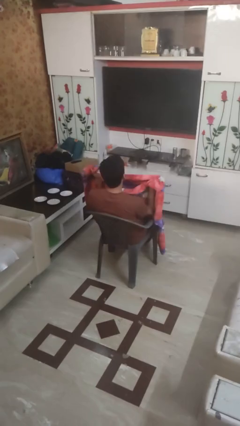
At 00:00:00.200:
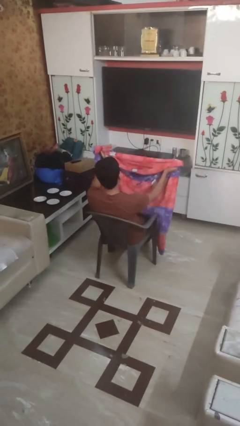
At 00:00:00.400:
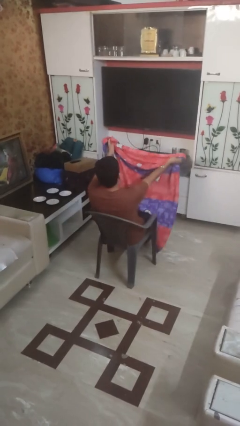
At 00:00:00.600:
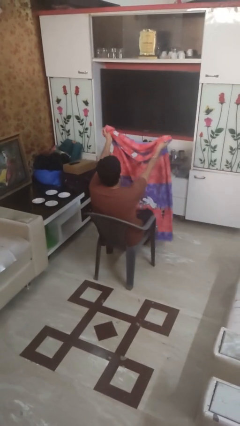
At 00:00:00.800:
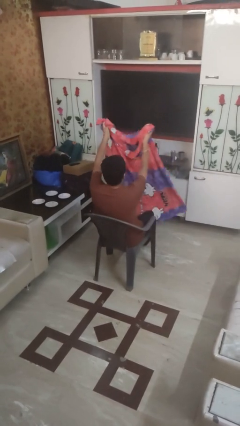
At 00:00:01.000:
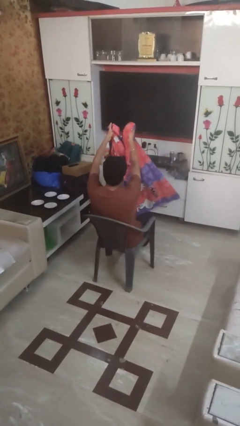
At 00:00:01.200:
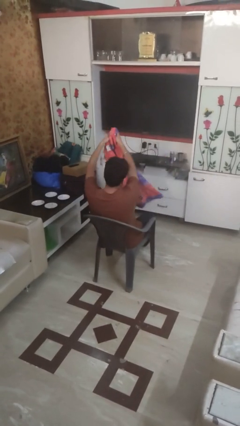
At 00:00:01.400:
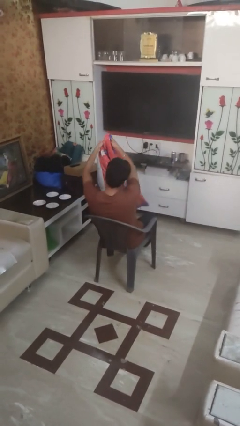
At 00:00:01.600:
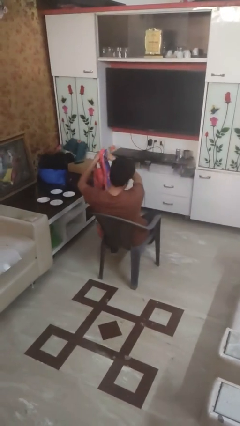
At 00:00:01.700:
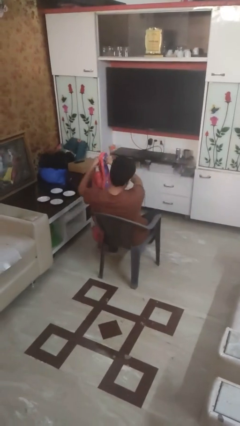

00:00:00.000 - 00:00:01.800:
person uncovers with blanket

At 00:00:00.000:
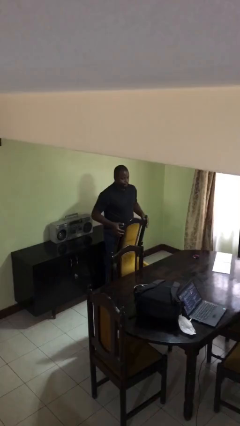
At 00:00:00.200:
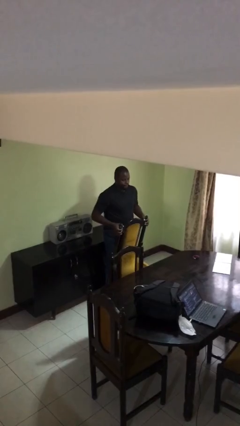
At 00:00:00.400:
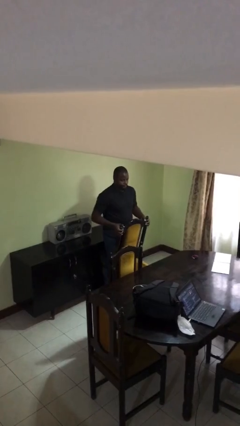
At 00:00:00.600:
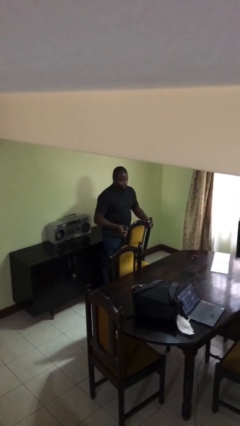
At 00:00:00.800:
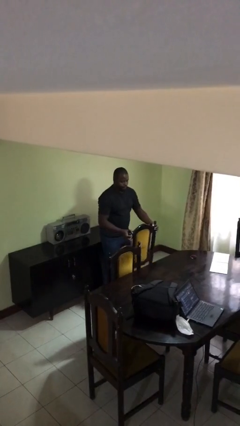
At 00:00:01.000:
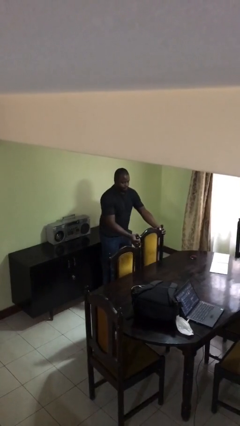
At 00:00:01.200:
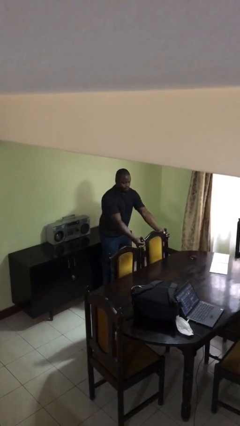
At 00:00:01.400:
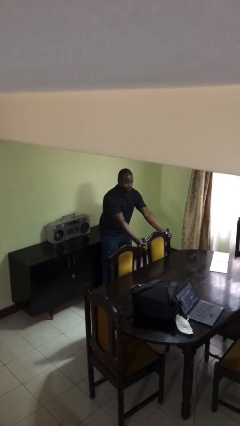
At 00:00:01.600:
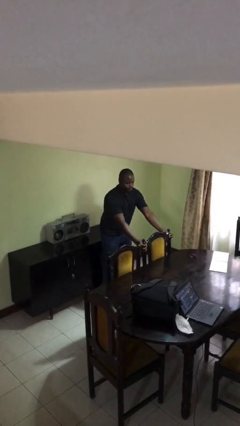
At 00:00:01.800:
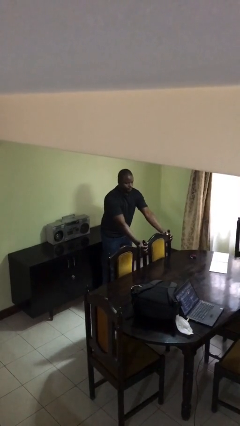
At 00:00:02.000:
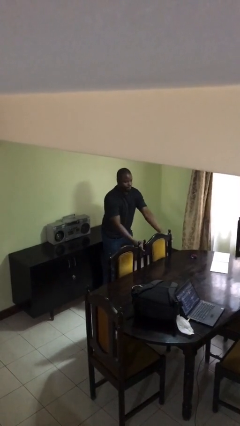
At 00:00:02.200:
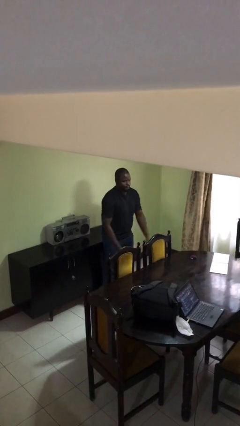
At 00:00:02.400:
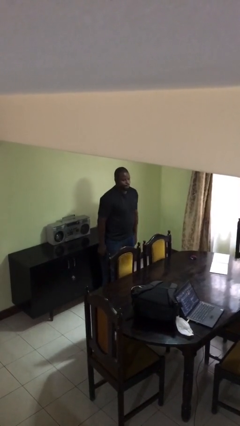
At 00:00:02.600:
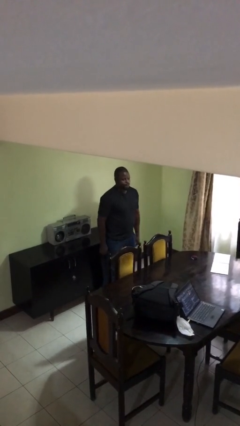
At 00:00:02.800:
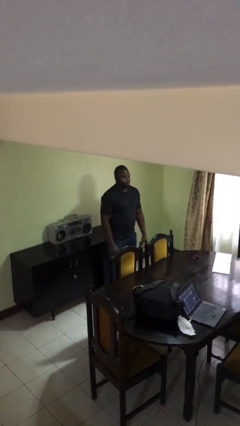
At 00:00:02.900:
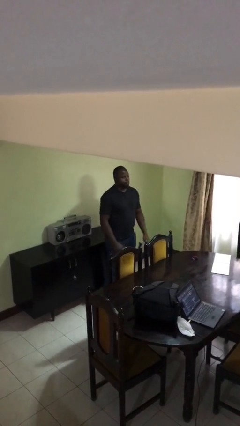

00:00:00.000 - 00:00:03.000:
person pushes in chair

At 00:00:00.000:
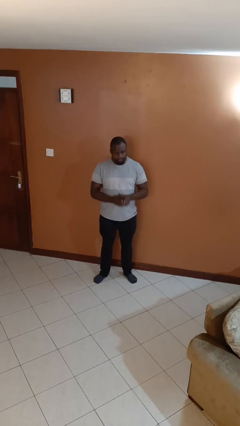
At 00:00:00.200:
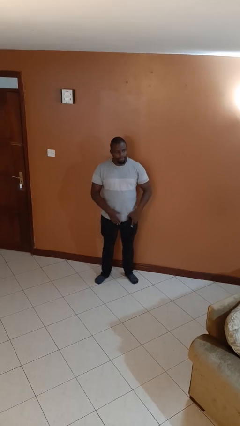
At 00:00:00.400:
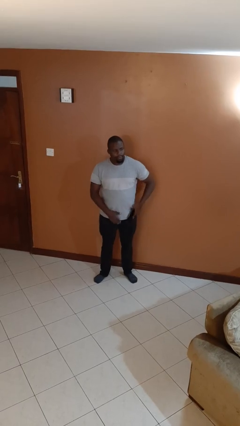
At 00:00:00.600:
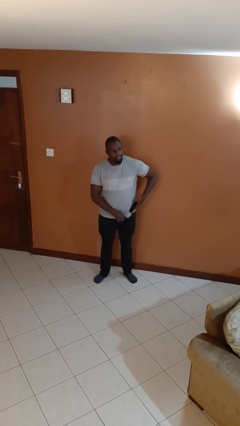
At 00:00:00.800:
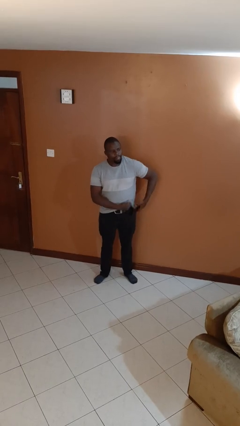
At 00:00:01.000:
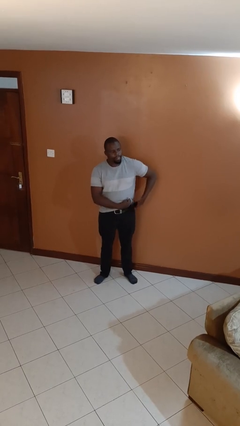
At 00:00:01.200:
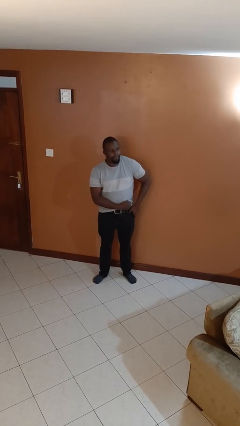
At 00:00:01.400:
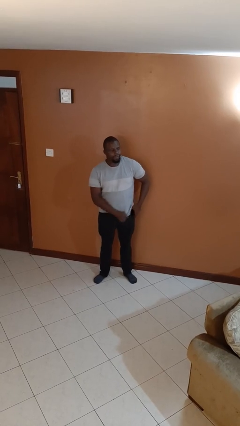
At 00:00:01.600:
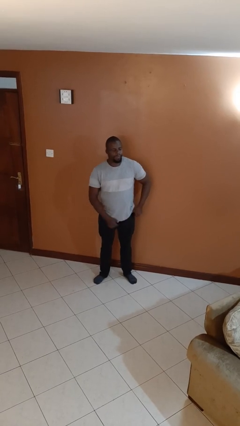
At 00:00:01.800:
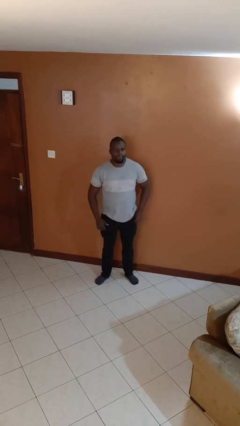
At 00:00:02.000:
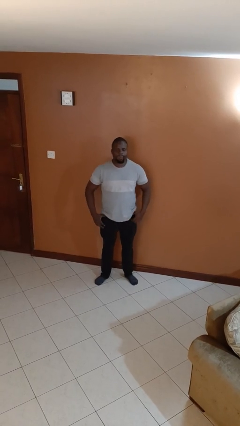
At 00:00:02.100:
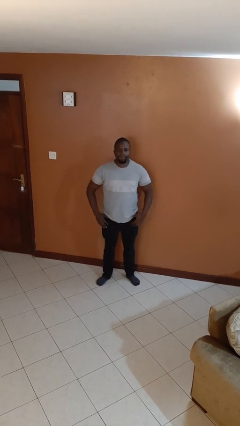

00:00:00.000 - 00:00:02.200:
person puts phone into pocket

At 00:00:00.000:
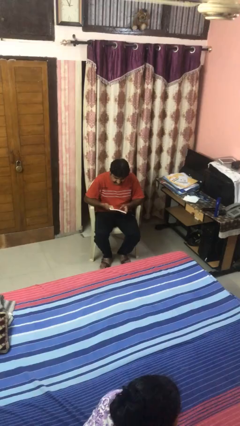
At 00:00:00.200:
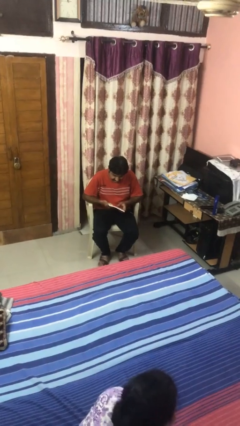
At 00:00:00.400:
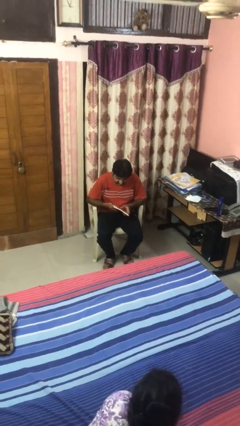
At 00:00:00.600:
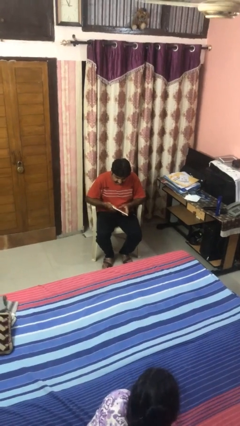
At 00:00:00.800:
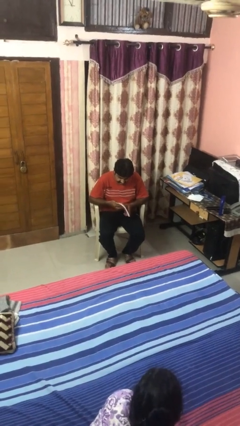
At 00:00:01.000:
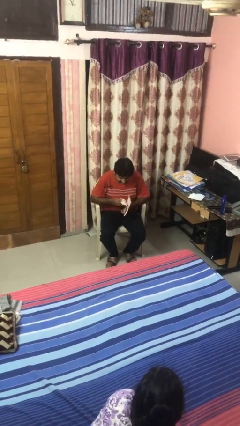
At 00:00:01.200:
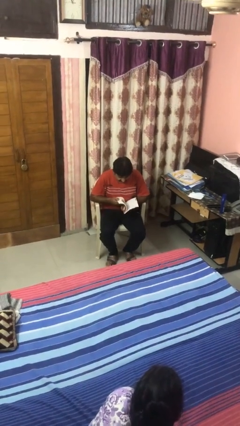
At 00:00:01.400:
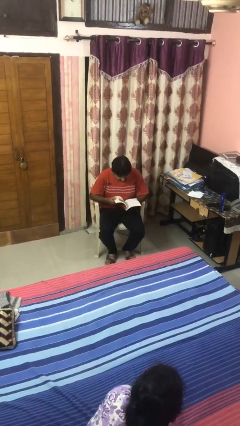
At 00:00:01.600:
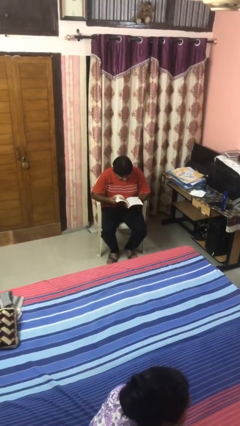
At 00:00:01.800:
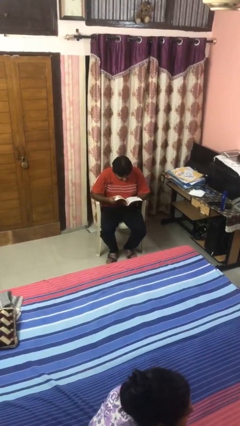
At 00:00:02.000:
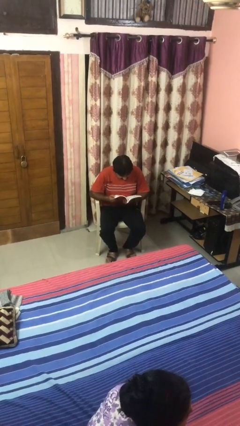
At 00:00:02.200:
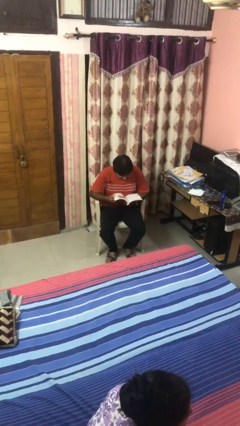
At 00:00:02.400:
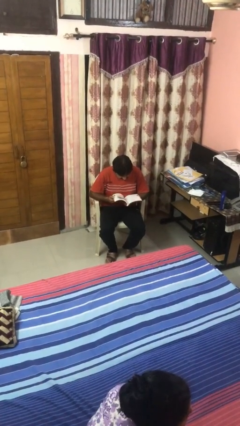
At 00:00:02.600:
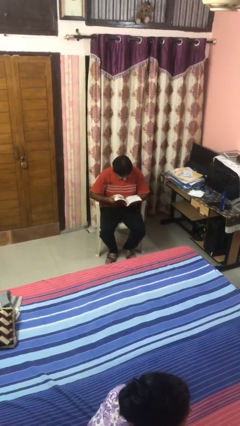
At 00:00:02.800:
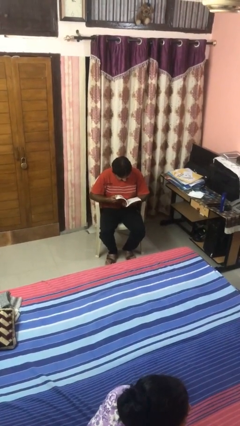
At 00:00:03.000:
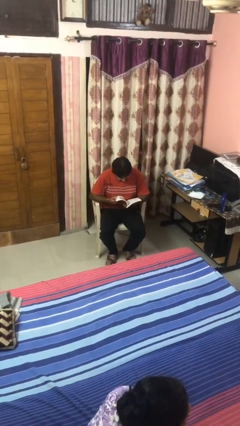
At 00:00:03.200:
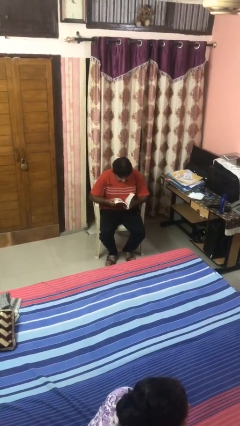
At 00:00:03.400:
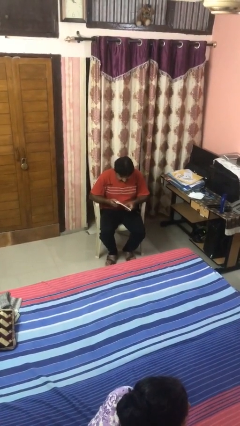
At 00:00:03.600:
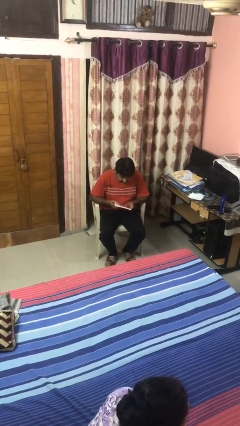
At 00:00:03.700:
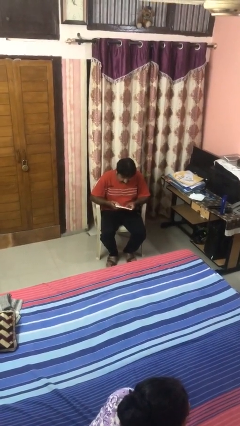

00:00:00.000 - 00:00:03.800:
person reads book

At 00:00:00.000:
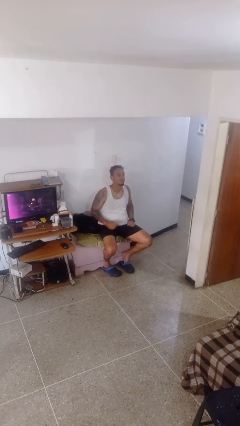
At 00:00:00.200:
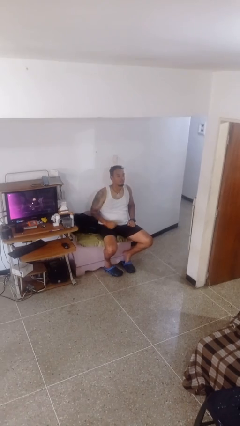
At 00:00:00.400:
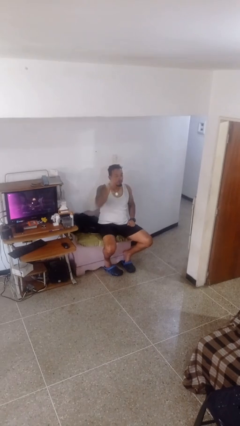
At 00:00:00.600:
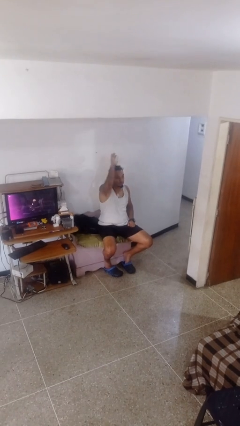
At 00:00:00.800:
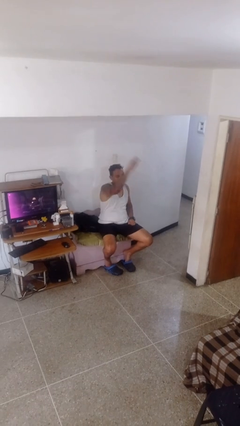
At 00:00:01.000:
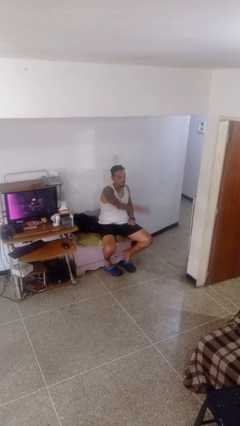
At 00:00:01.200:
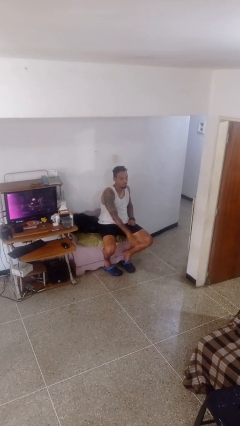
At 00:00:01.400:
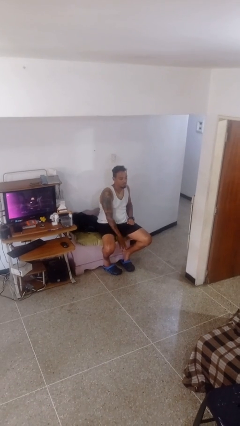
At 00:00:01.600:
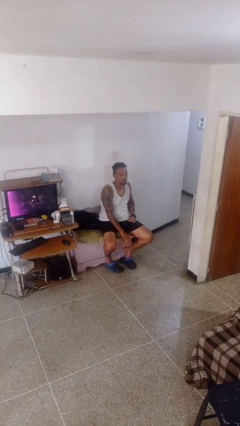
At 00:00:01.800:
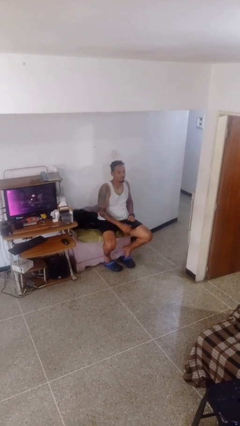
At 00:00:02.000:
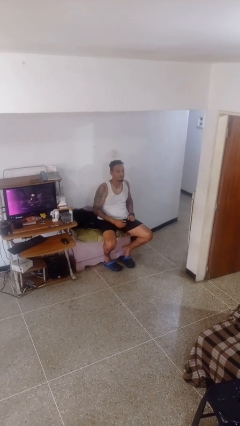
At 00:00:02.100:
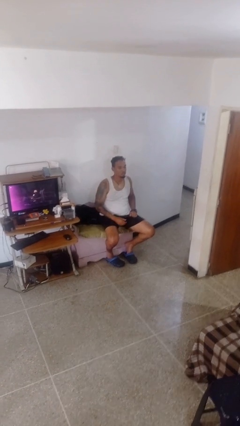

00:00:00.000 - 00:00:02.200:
person gestures swipe down

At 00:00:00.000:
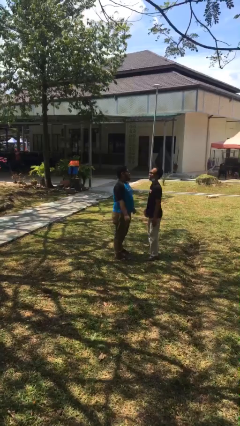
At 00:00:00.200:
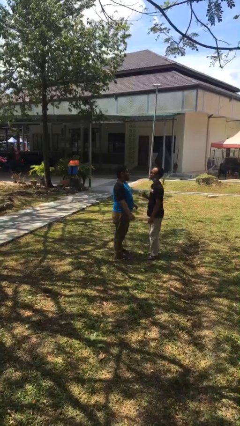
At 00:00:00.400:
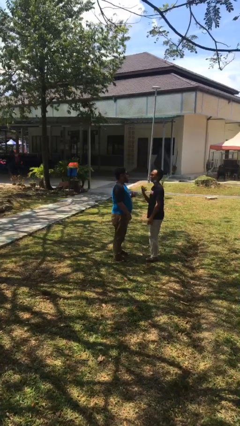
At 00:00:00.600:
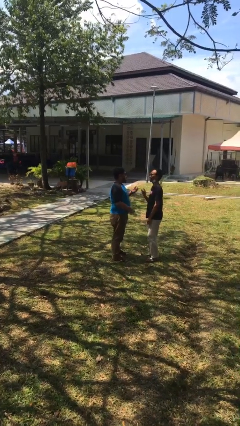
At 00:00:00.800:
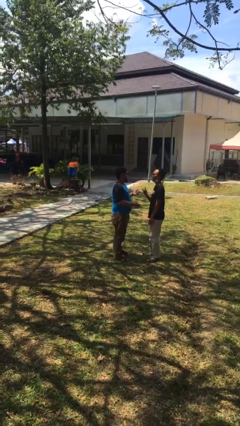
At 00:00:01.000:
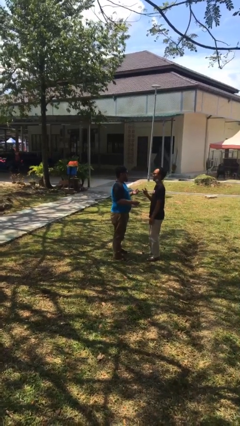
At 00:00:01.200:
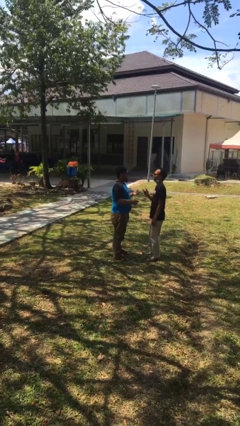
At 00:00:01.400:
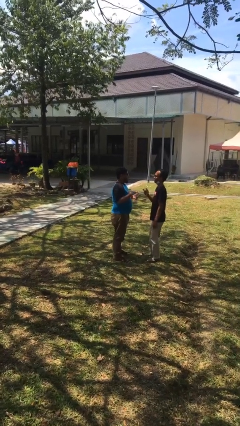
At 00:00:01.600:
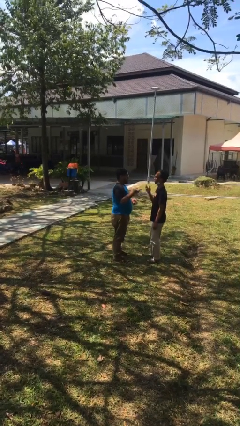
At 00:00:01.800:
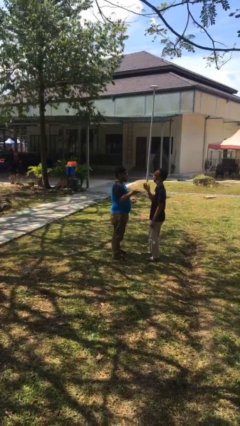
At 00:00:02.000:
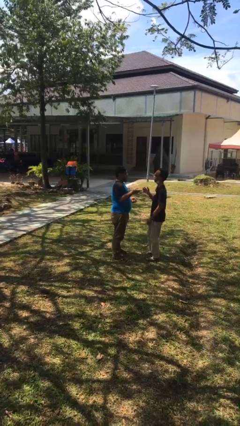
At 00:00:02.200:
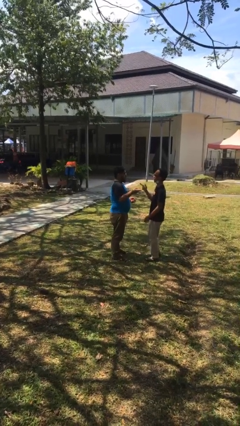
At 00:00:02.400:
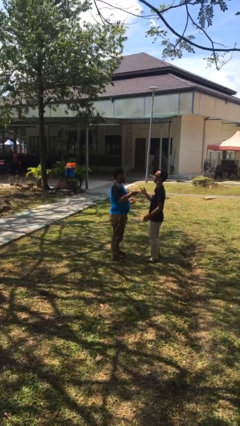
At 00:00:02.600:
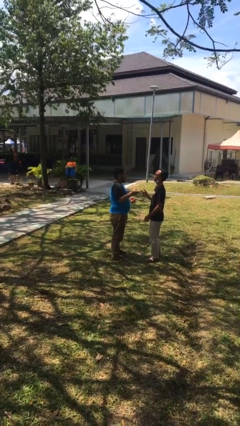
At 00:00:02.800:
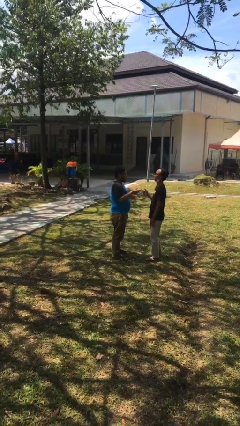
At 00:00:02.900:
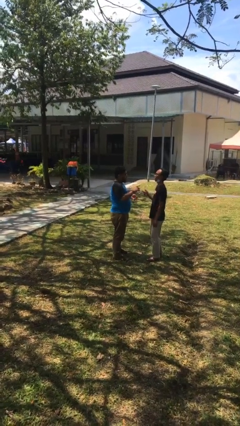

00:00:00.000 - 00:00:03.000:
person talks to person

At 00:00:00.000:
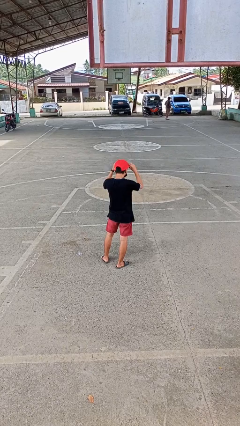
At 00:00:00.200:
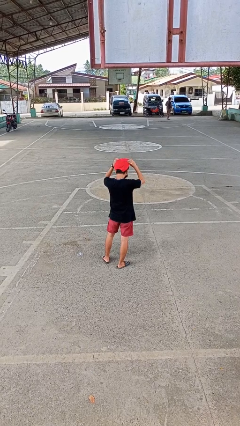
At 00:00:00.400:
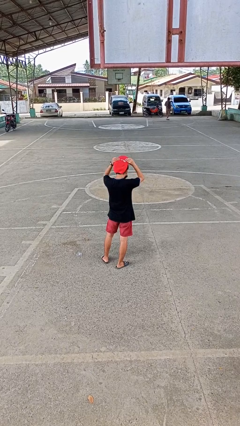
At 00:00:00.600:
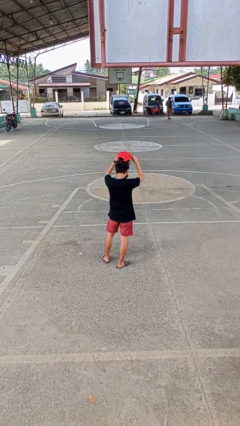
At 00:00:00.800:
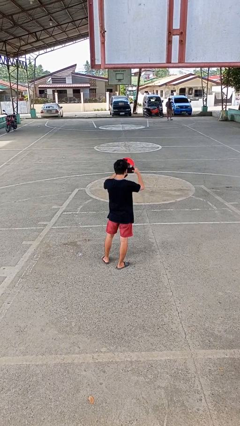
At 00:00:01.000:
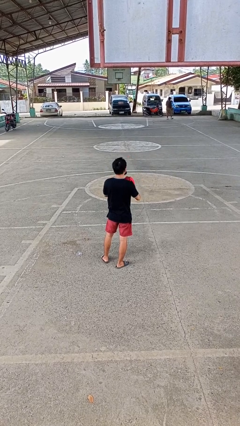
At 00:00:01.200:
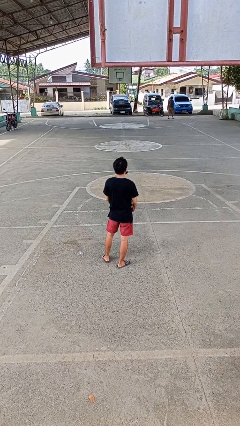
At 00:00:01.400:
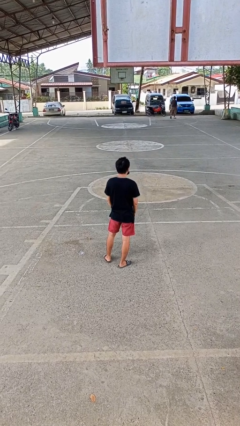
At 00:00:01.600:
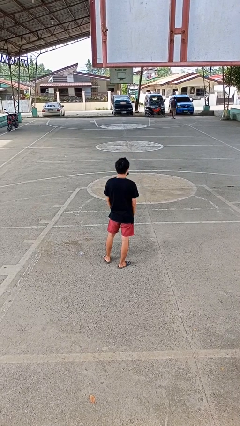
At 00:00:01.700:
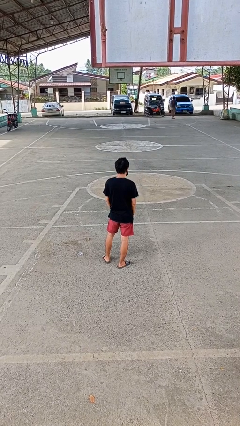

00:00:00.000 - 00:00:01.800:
person takes off hat
